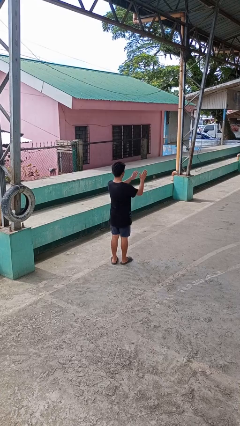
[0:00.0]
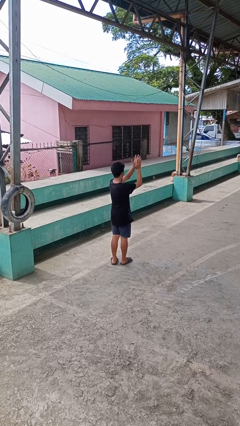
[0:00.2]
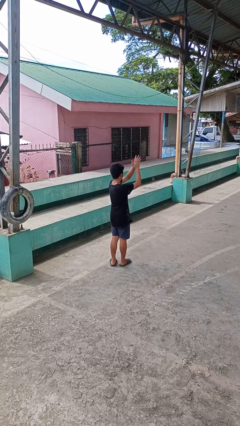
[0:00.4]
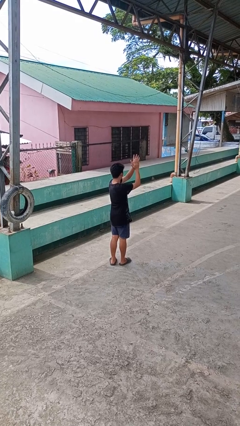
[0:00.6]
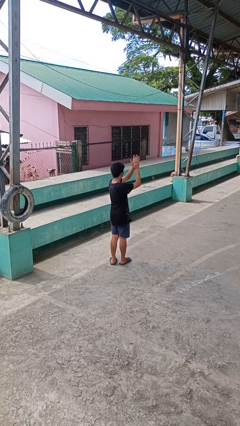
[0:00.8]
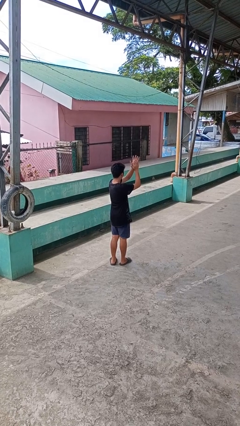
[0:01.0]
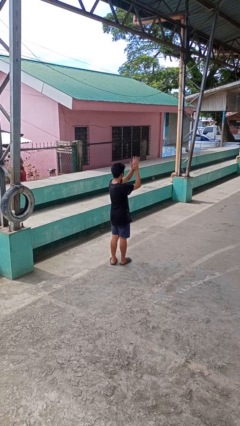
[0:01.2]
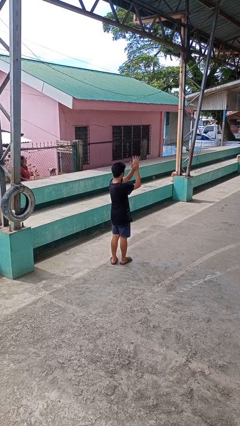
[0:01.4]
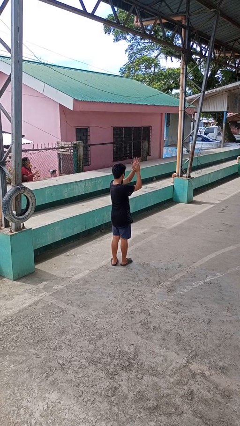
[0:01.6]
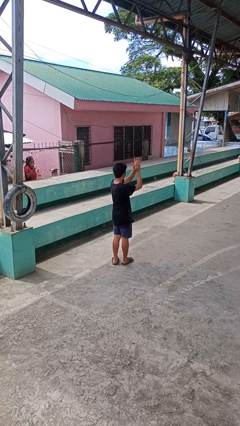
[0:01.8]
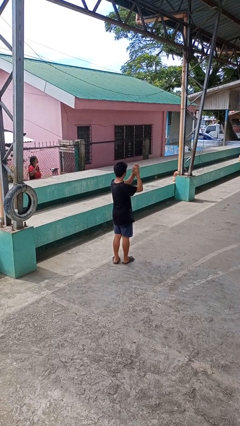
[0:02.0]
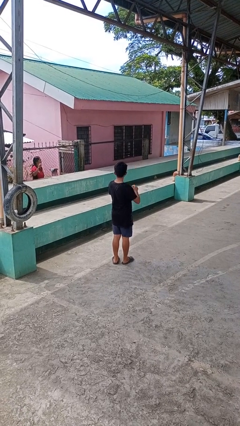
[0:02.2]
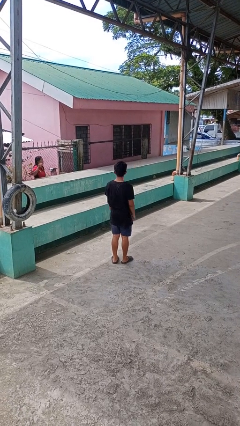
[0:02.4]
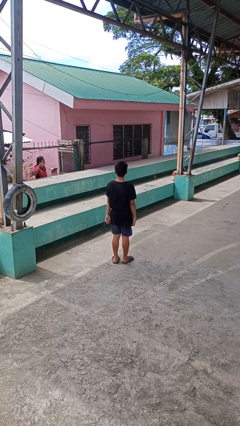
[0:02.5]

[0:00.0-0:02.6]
person claps hands

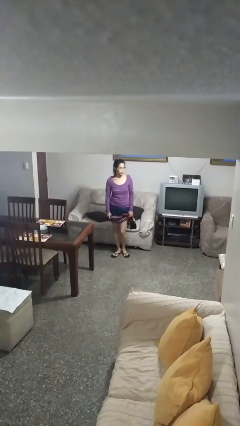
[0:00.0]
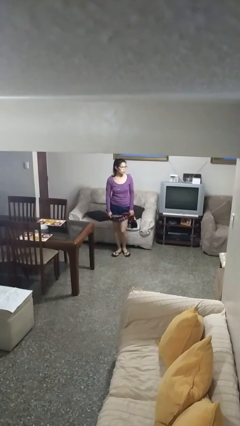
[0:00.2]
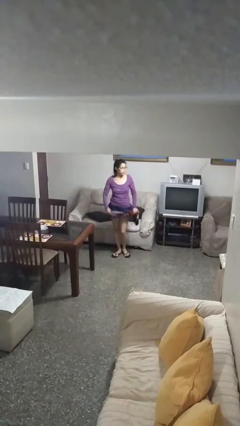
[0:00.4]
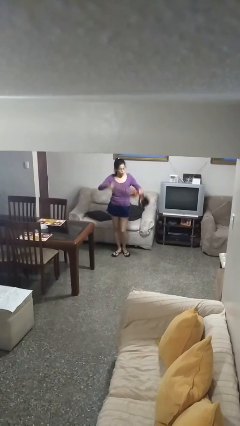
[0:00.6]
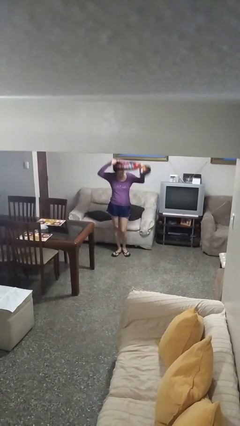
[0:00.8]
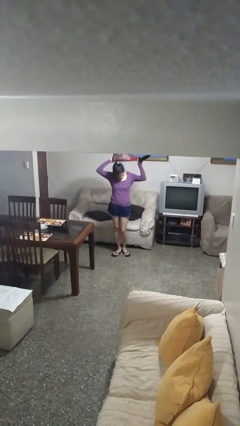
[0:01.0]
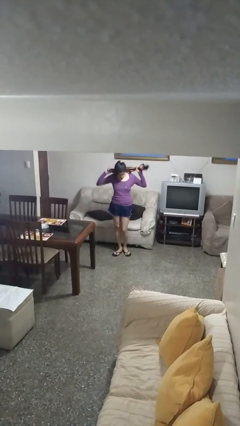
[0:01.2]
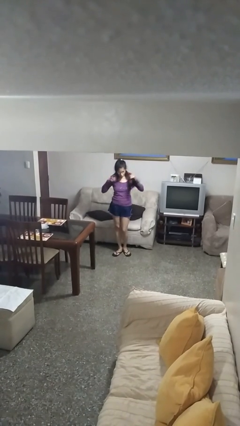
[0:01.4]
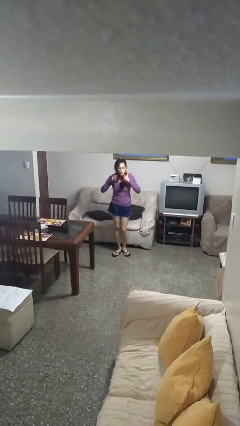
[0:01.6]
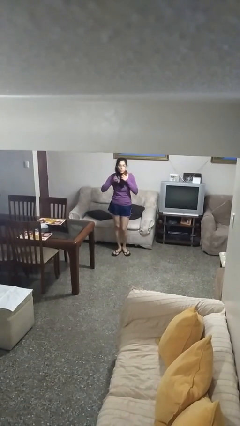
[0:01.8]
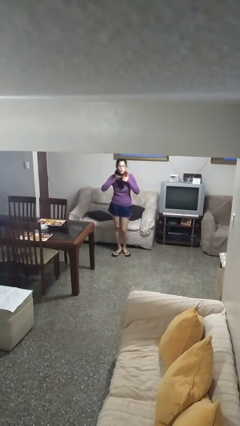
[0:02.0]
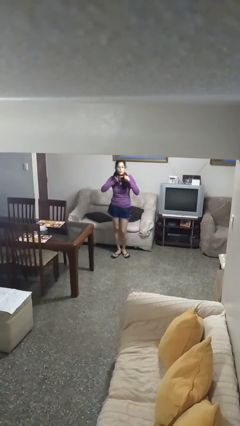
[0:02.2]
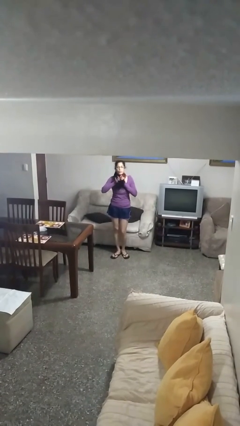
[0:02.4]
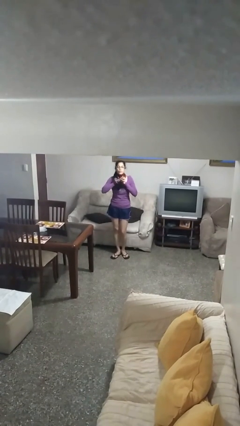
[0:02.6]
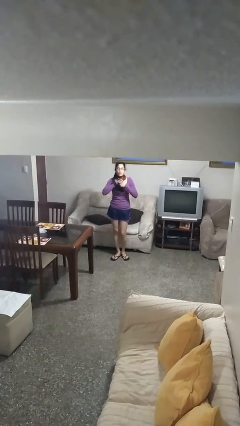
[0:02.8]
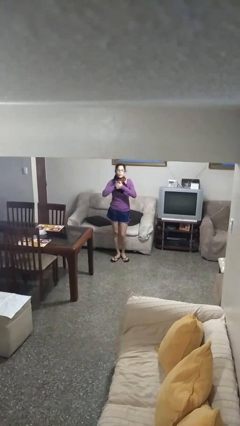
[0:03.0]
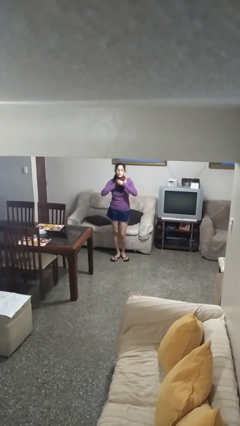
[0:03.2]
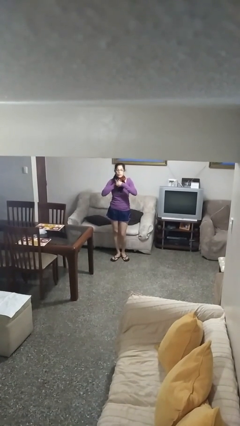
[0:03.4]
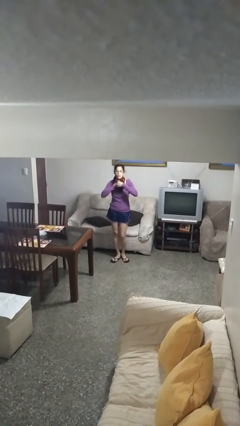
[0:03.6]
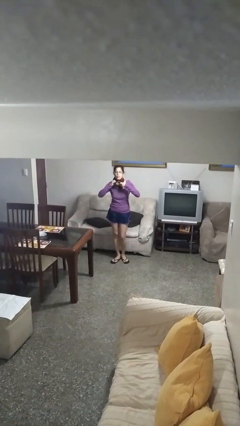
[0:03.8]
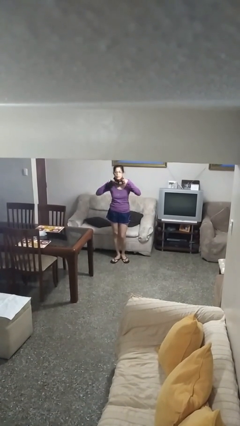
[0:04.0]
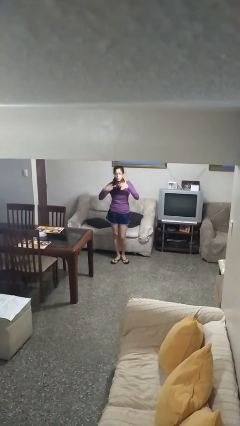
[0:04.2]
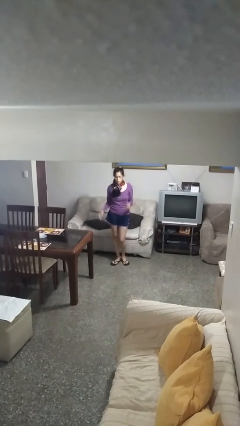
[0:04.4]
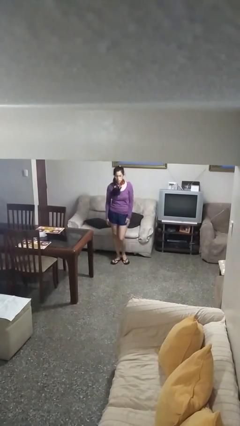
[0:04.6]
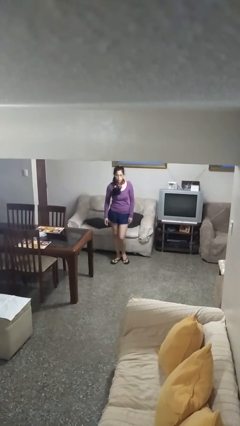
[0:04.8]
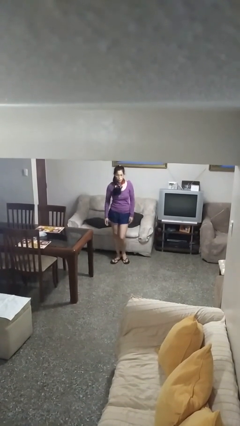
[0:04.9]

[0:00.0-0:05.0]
person puts on scarf

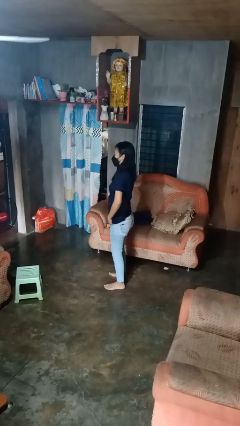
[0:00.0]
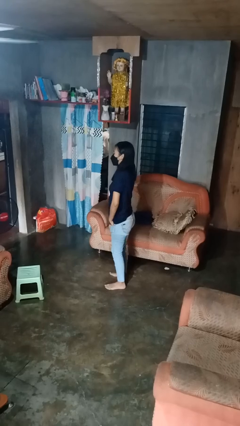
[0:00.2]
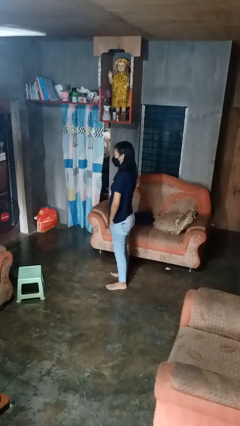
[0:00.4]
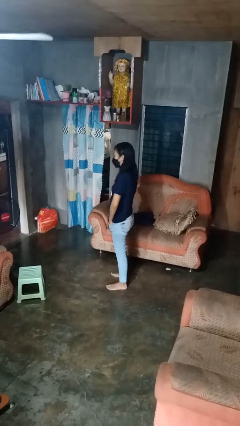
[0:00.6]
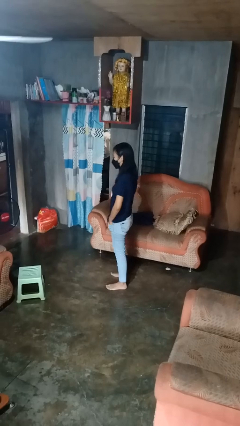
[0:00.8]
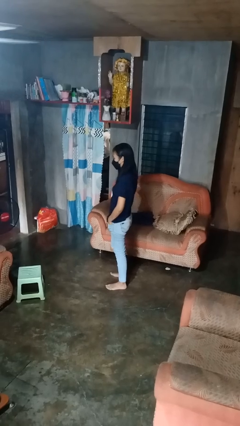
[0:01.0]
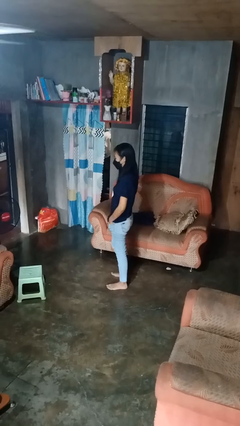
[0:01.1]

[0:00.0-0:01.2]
person puts hands in back pockets

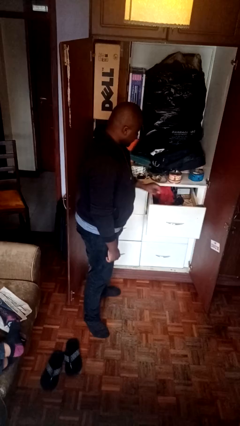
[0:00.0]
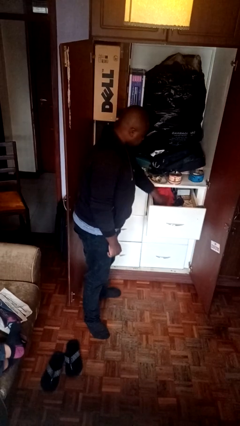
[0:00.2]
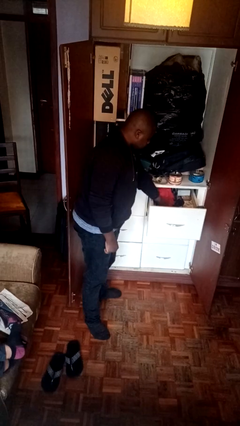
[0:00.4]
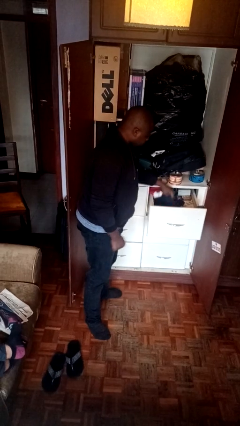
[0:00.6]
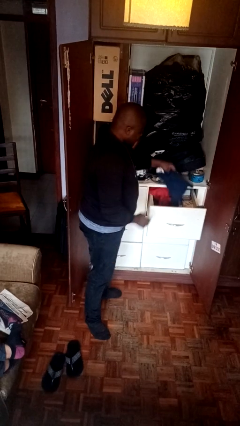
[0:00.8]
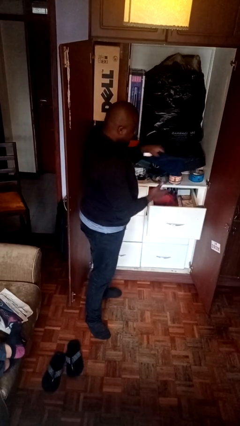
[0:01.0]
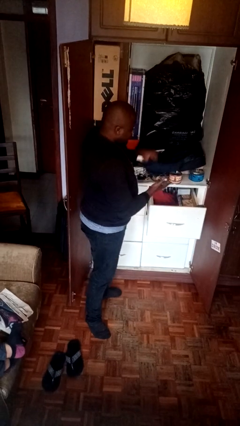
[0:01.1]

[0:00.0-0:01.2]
person takes clothes from dresser

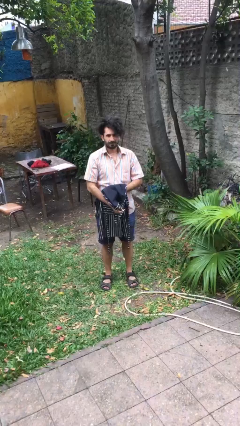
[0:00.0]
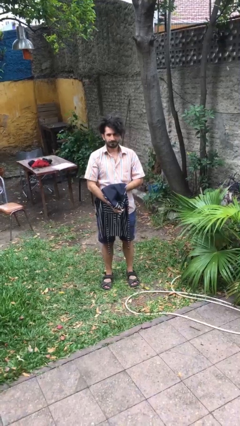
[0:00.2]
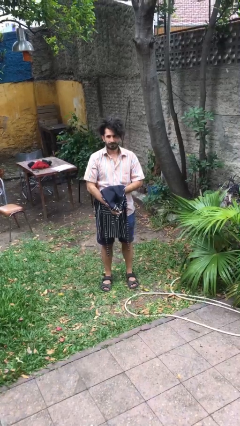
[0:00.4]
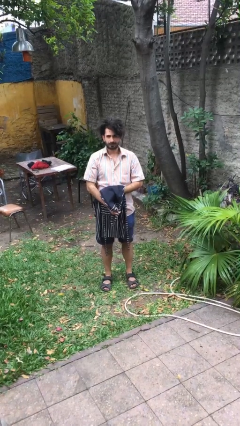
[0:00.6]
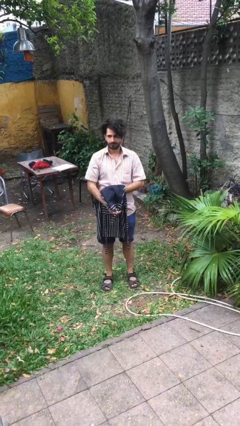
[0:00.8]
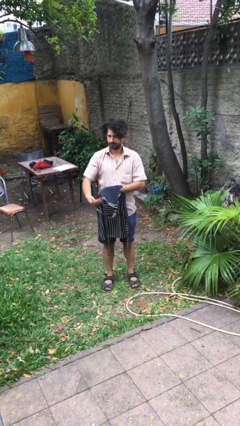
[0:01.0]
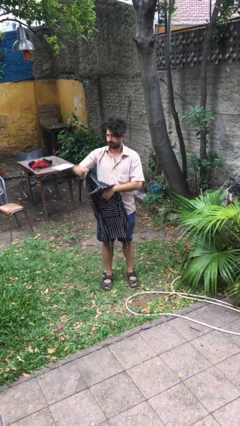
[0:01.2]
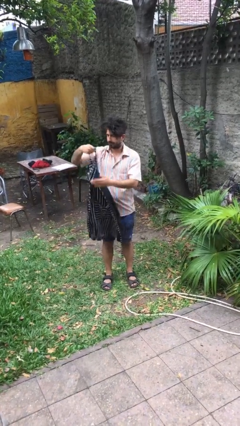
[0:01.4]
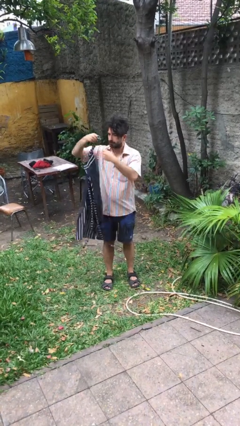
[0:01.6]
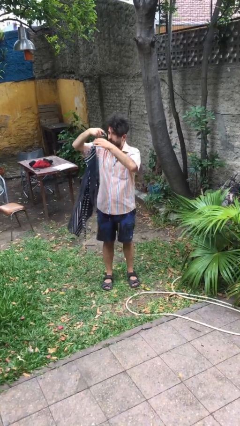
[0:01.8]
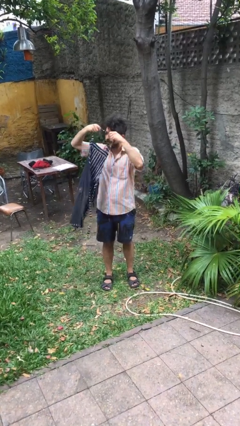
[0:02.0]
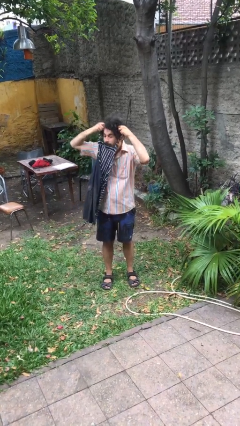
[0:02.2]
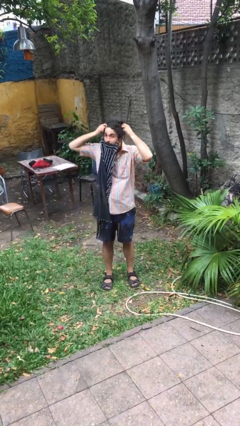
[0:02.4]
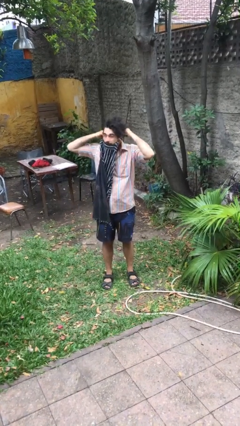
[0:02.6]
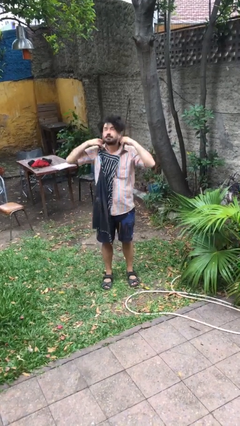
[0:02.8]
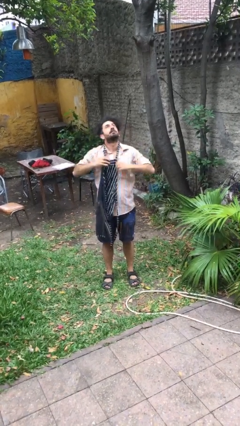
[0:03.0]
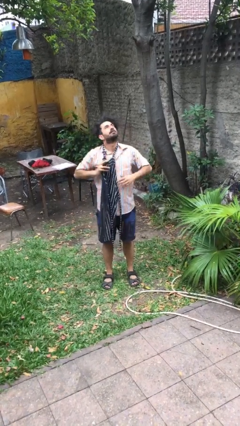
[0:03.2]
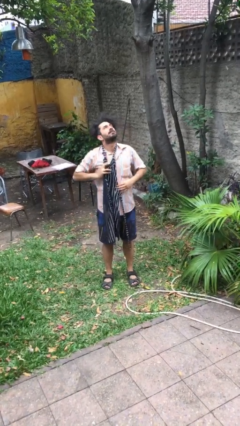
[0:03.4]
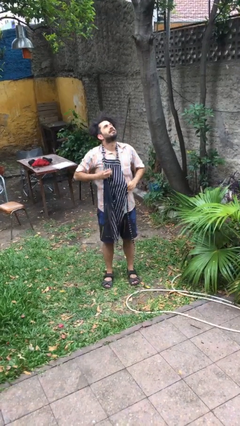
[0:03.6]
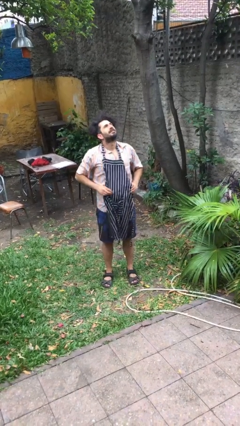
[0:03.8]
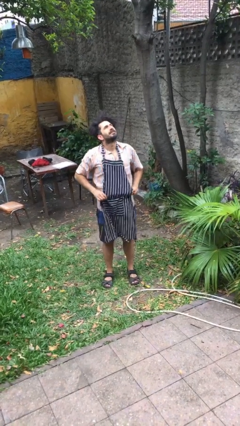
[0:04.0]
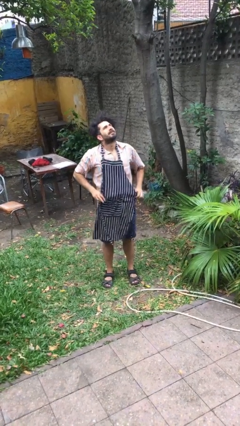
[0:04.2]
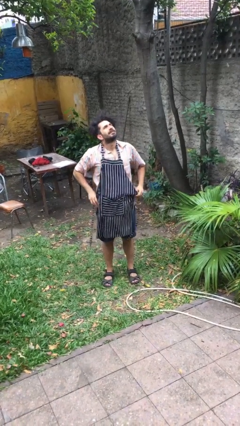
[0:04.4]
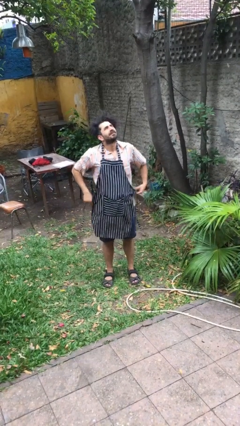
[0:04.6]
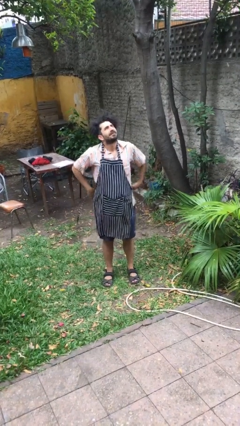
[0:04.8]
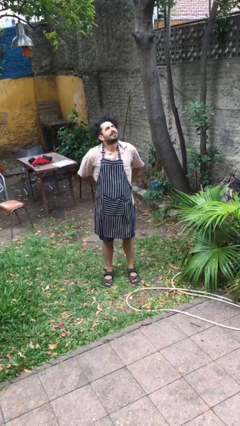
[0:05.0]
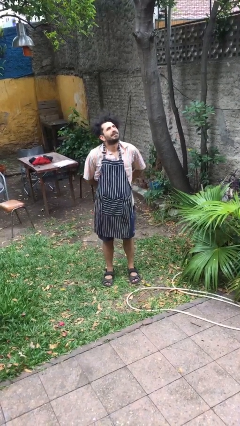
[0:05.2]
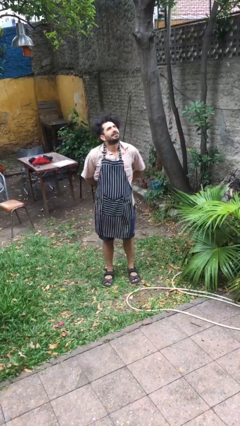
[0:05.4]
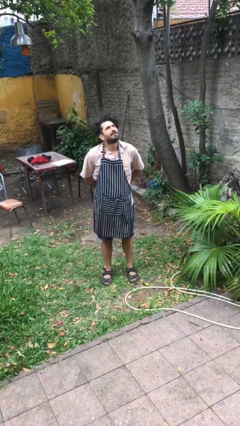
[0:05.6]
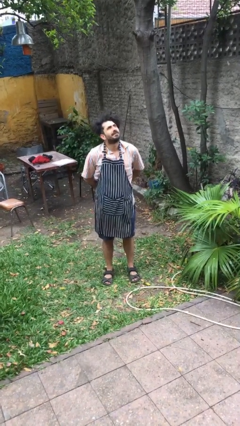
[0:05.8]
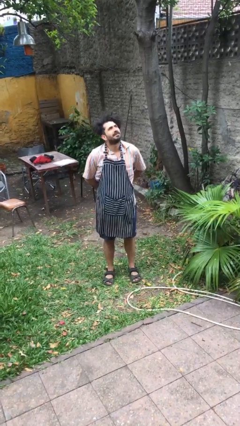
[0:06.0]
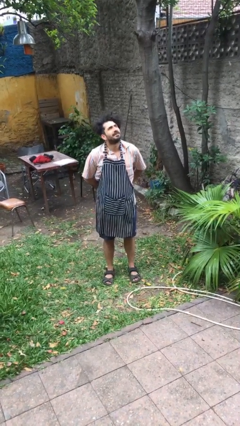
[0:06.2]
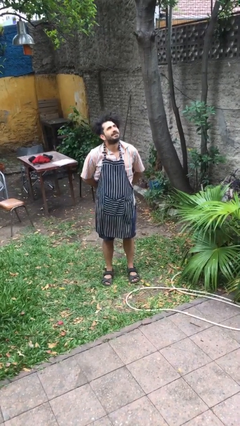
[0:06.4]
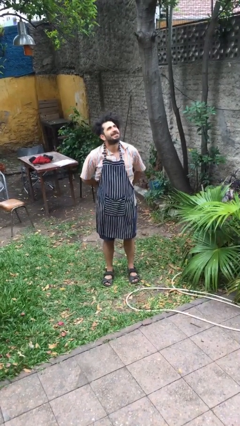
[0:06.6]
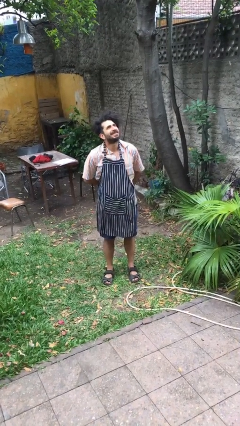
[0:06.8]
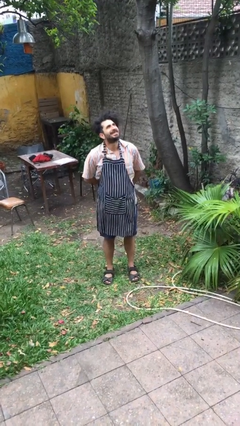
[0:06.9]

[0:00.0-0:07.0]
person puts on apron

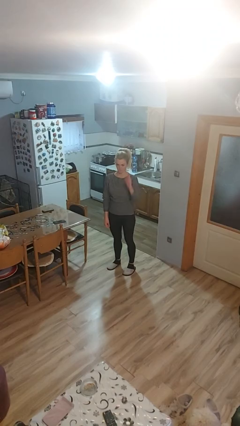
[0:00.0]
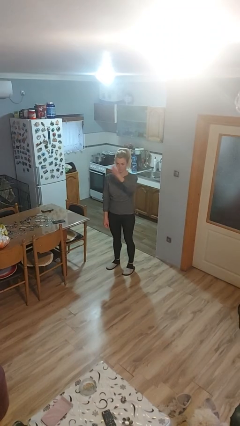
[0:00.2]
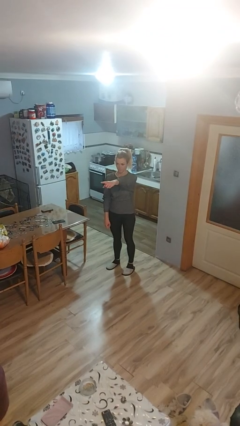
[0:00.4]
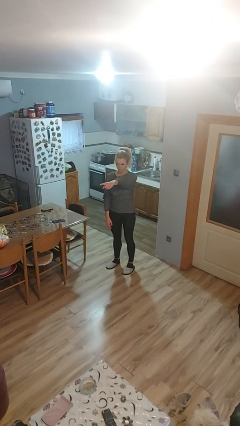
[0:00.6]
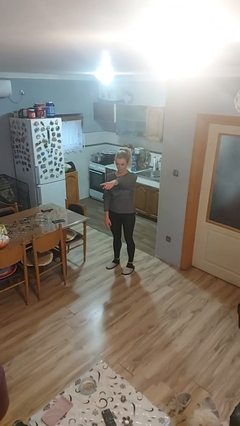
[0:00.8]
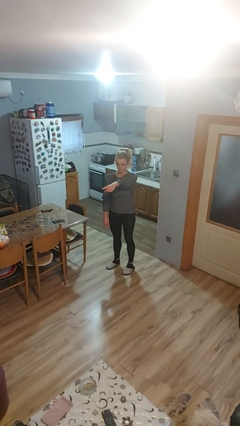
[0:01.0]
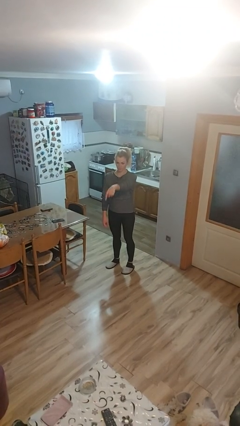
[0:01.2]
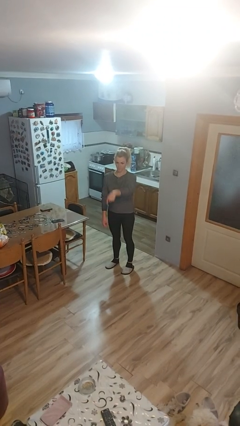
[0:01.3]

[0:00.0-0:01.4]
person points at person
